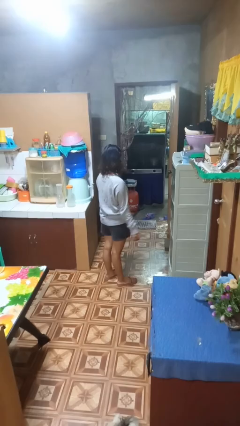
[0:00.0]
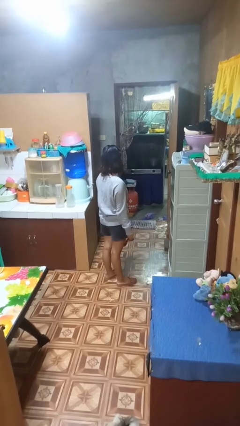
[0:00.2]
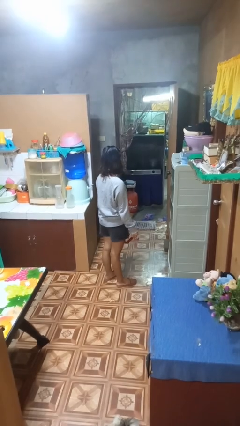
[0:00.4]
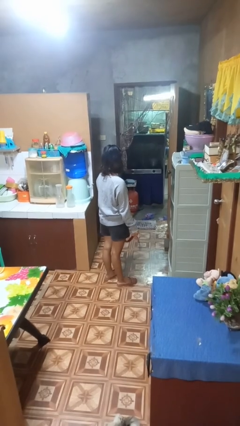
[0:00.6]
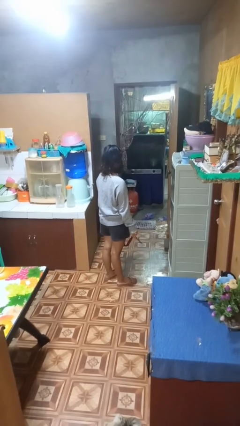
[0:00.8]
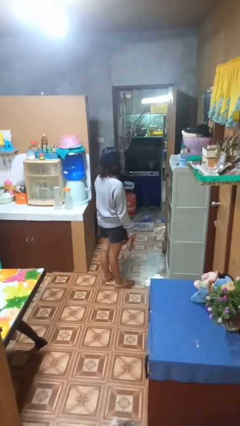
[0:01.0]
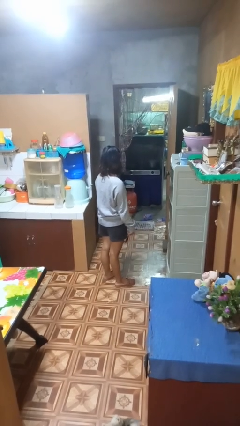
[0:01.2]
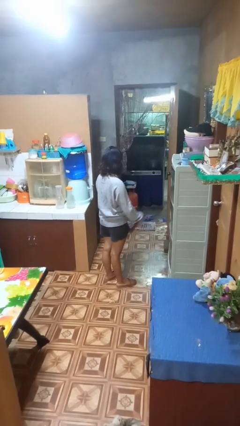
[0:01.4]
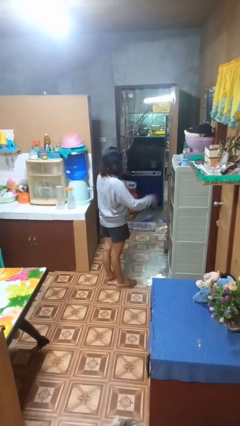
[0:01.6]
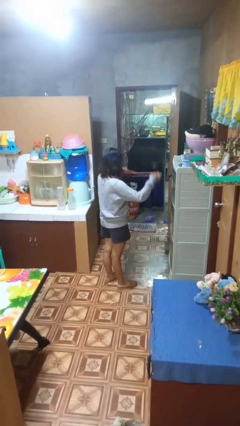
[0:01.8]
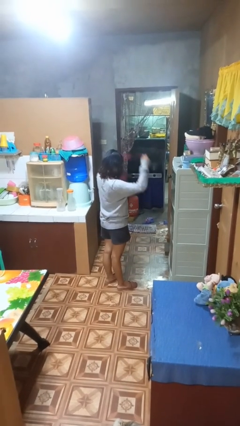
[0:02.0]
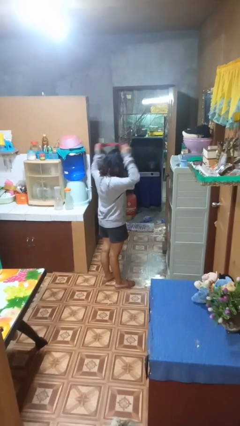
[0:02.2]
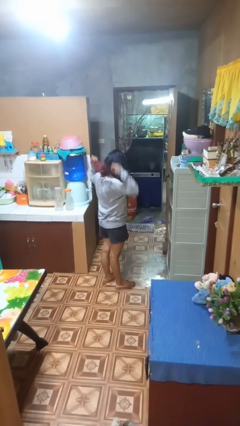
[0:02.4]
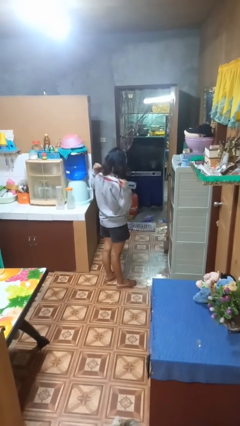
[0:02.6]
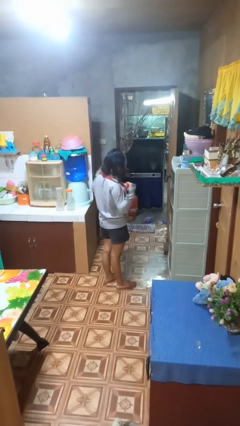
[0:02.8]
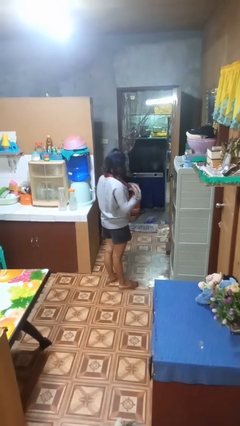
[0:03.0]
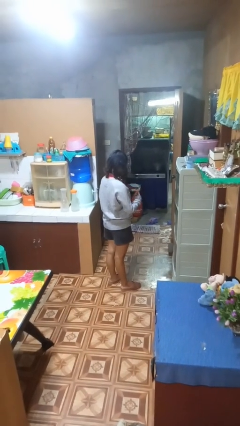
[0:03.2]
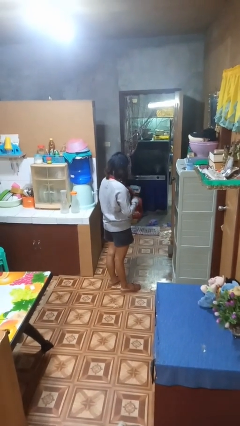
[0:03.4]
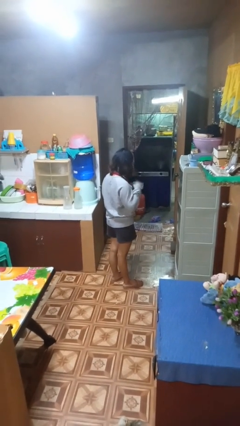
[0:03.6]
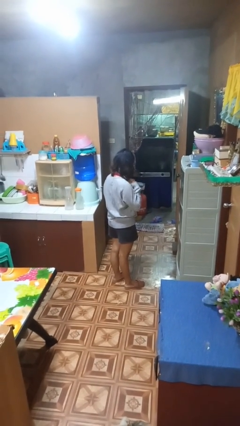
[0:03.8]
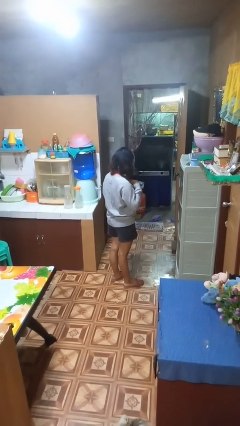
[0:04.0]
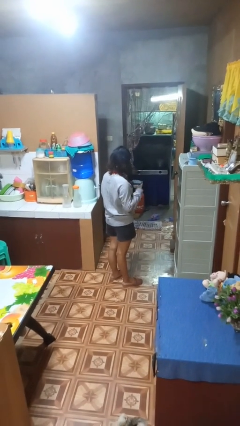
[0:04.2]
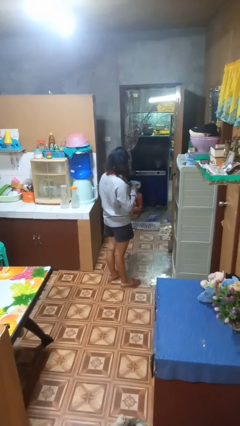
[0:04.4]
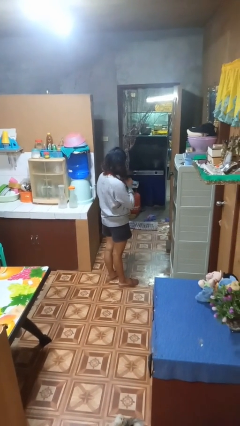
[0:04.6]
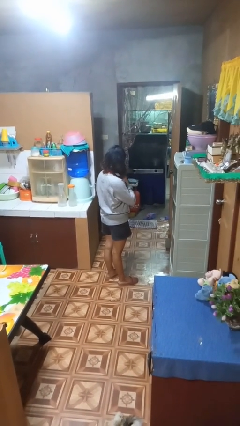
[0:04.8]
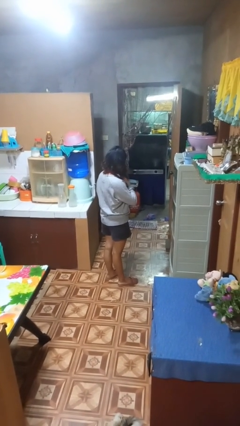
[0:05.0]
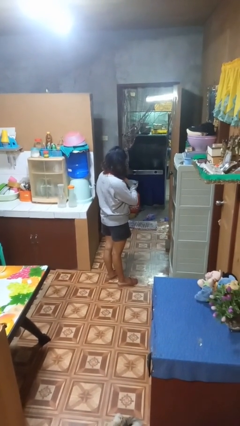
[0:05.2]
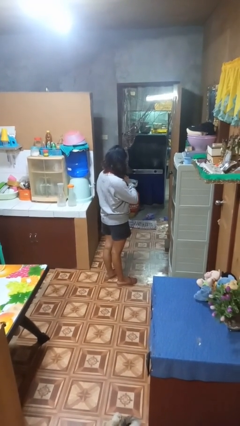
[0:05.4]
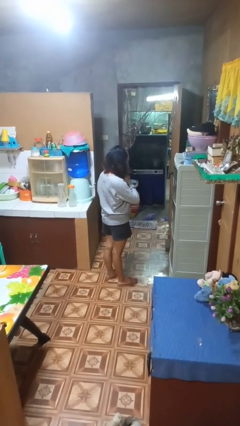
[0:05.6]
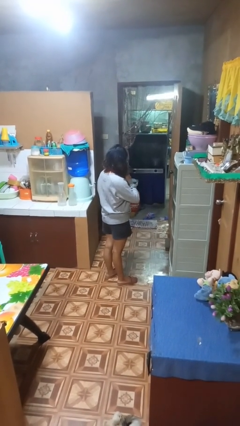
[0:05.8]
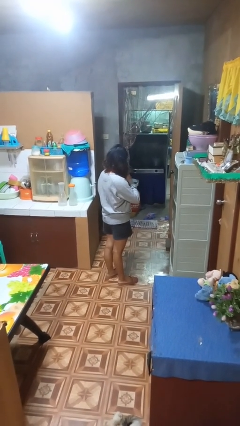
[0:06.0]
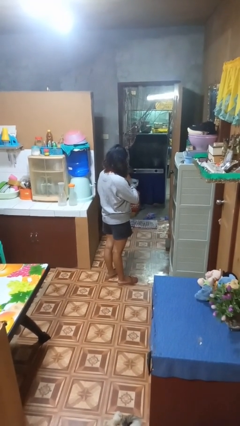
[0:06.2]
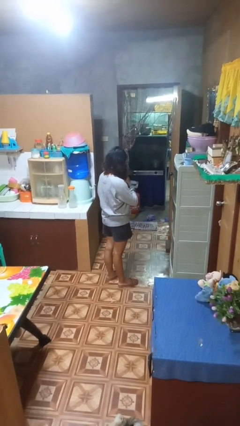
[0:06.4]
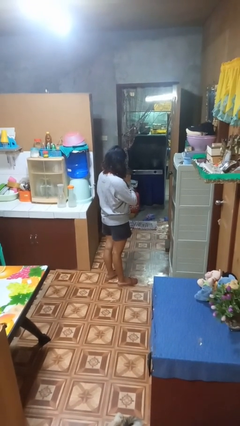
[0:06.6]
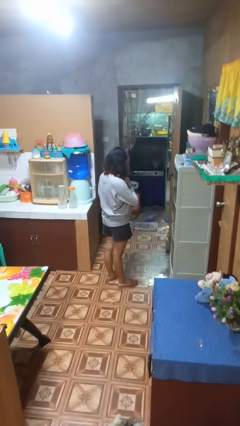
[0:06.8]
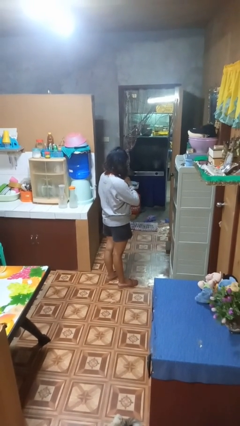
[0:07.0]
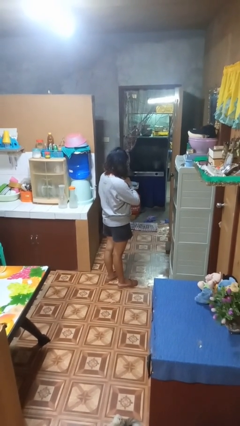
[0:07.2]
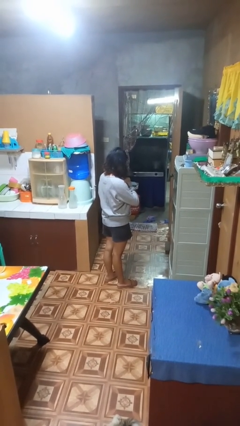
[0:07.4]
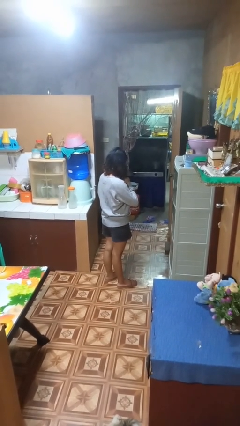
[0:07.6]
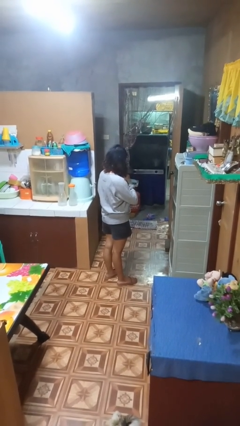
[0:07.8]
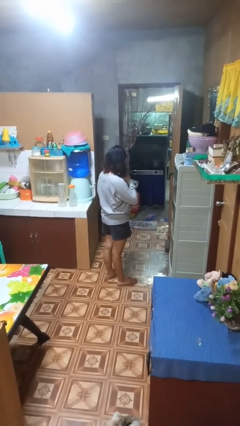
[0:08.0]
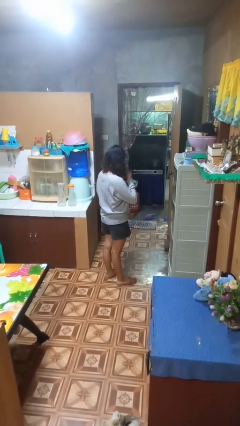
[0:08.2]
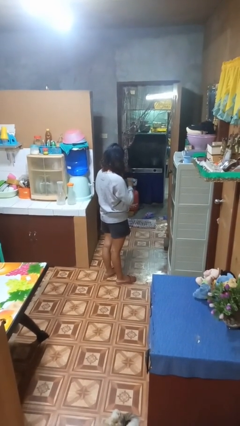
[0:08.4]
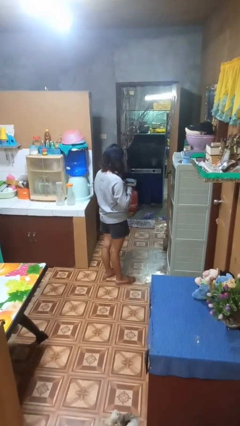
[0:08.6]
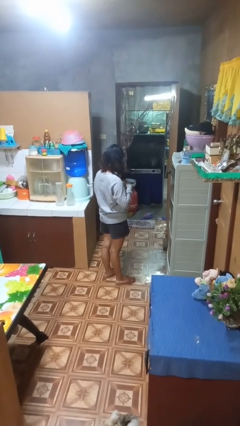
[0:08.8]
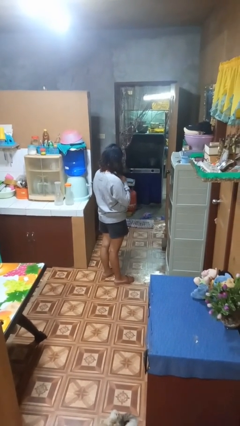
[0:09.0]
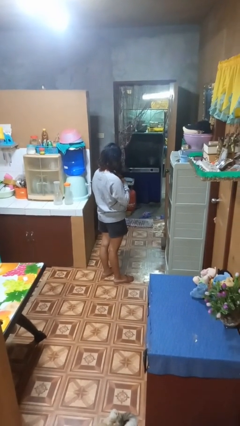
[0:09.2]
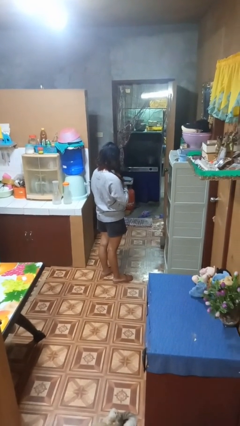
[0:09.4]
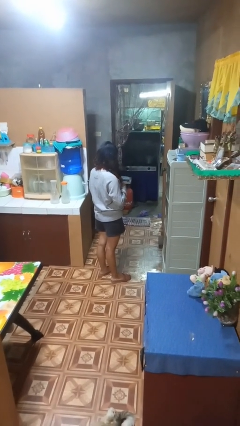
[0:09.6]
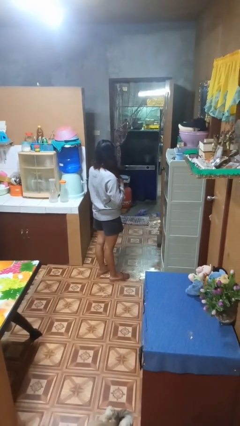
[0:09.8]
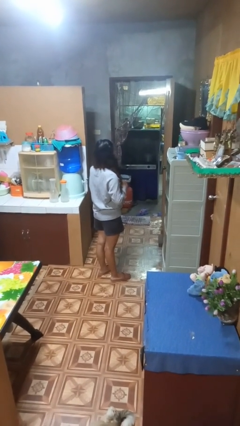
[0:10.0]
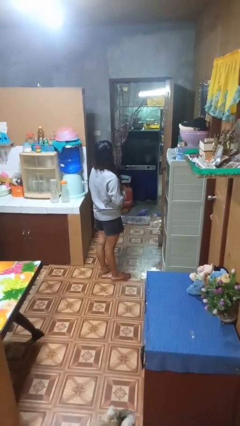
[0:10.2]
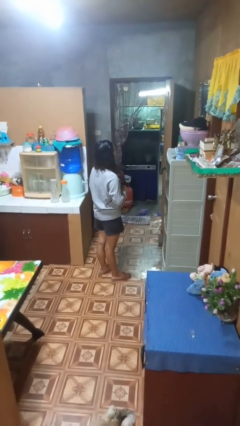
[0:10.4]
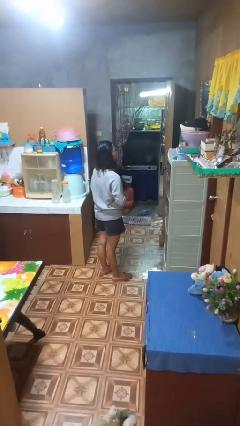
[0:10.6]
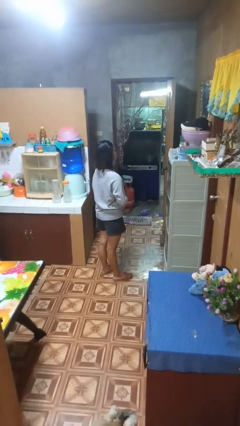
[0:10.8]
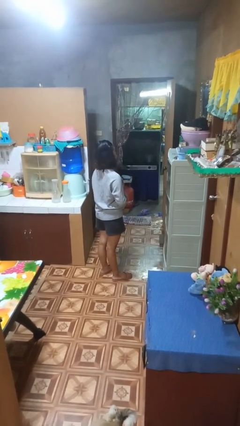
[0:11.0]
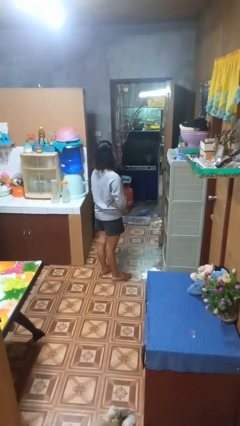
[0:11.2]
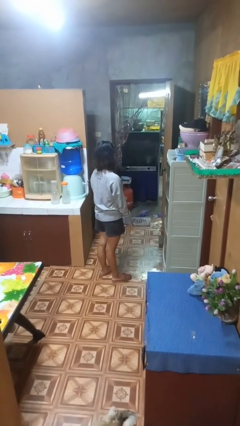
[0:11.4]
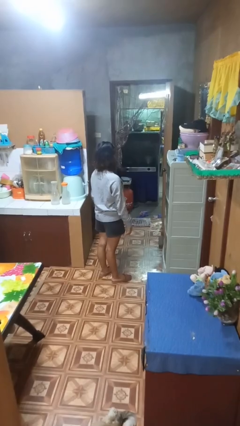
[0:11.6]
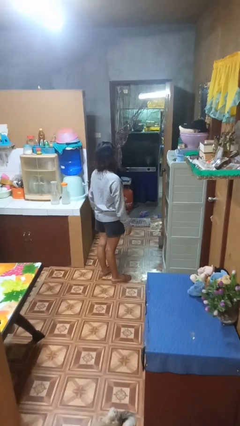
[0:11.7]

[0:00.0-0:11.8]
person puts on necktie

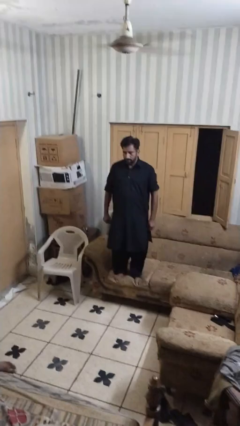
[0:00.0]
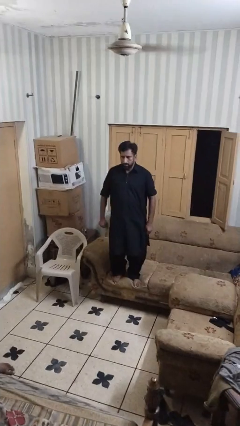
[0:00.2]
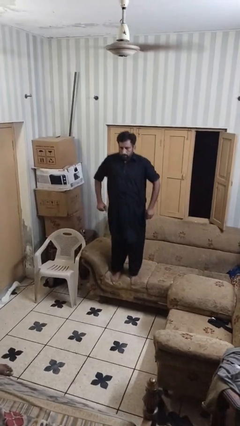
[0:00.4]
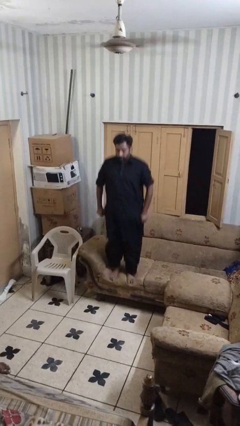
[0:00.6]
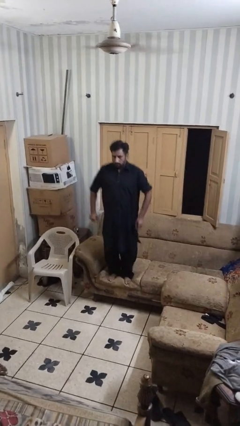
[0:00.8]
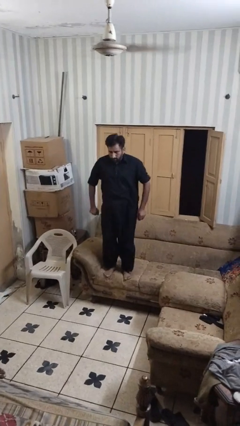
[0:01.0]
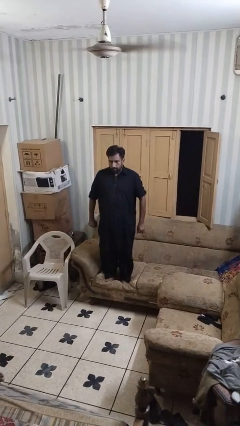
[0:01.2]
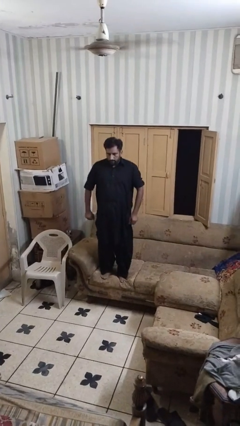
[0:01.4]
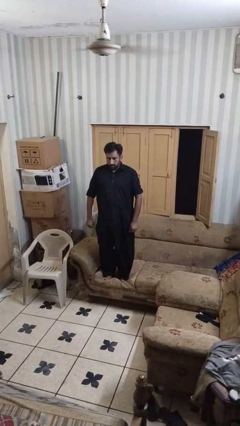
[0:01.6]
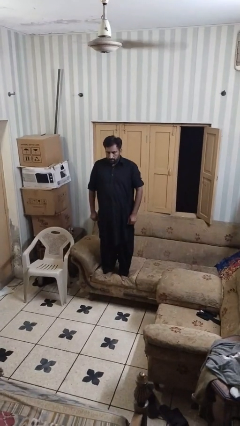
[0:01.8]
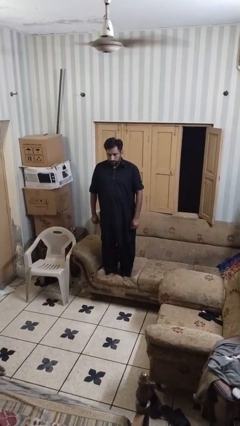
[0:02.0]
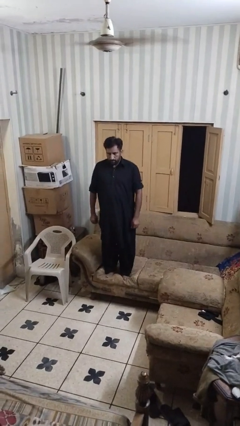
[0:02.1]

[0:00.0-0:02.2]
person jumps on couch

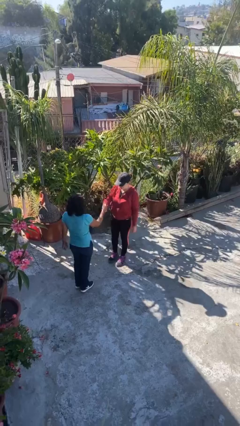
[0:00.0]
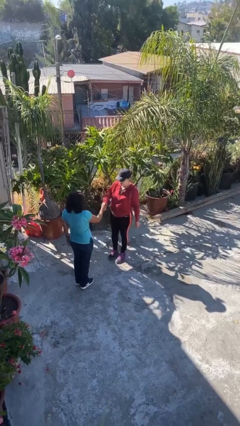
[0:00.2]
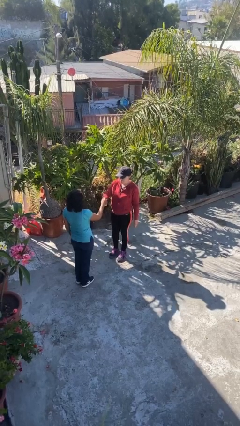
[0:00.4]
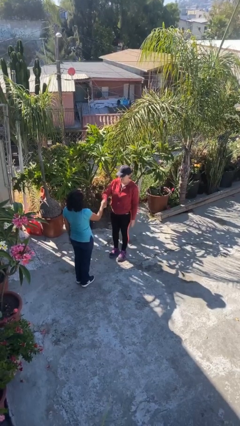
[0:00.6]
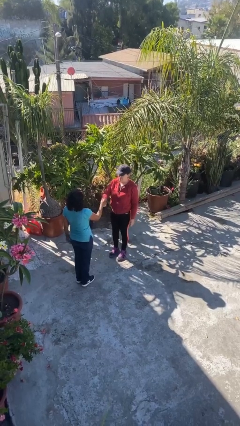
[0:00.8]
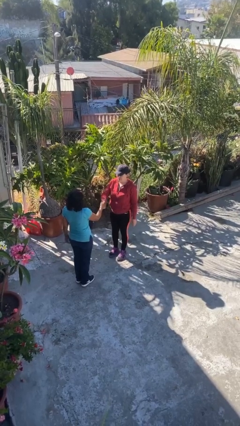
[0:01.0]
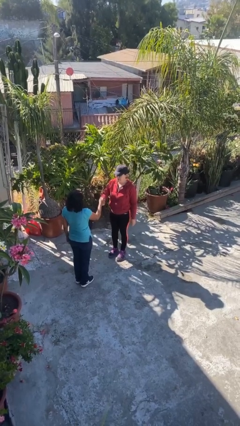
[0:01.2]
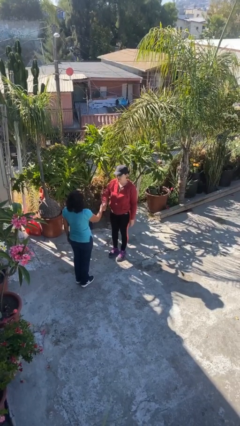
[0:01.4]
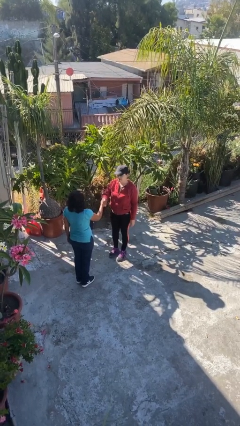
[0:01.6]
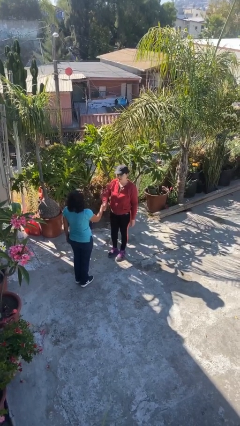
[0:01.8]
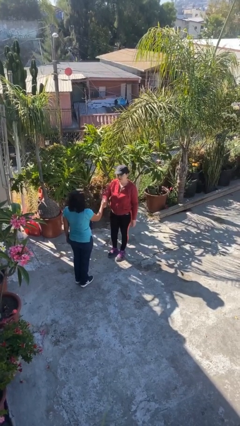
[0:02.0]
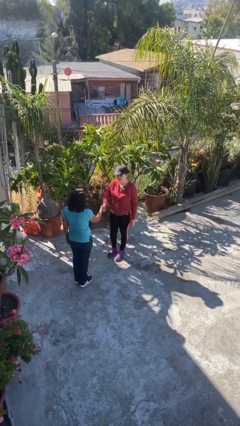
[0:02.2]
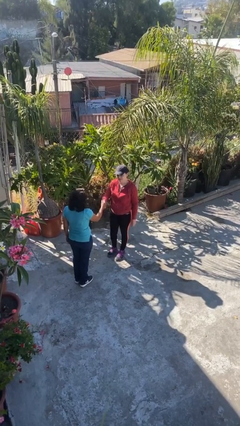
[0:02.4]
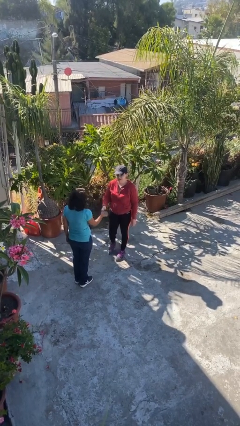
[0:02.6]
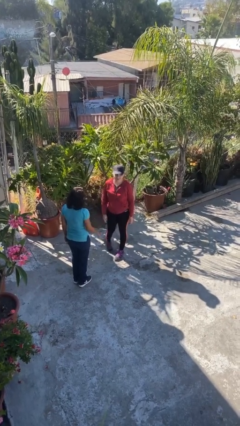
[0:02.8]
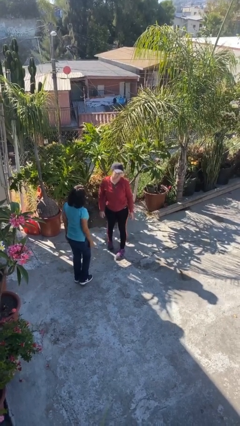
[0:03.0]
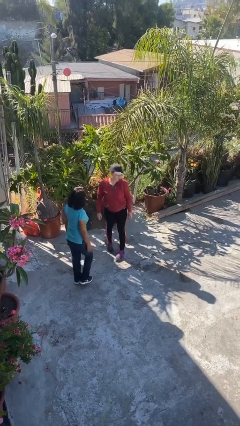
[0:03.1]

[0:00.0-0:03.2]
person shakes hand

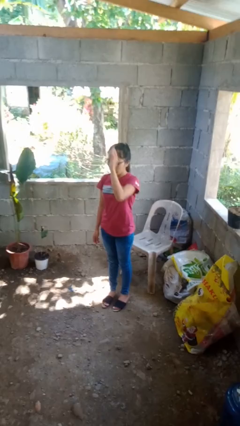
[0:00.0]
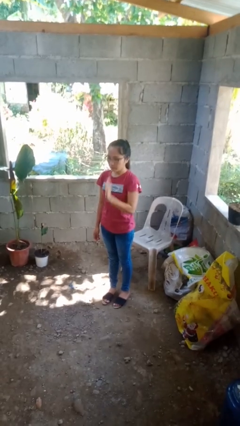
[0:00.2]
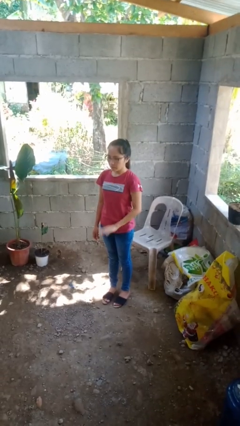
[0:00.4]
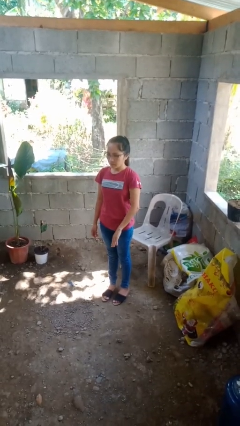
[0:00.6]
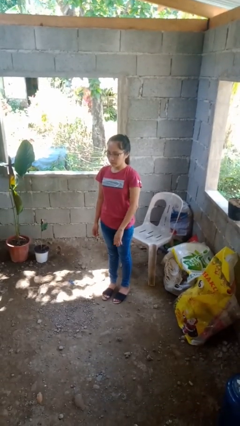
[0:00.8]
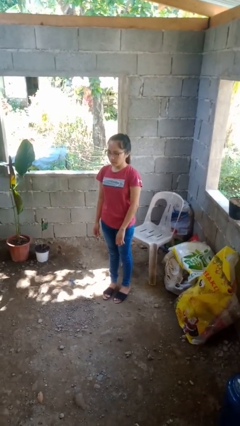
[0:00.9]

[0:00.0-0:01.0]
person gestures swipe down
